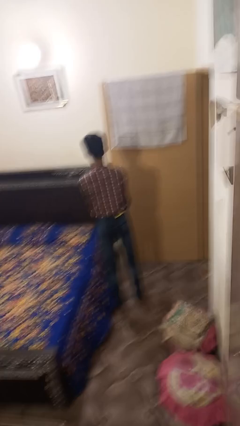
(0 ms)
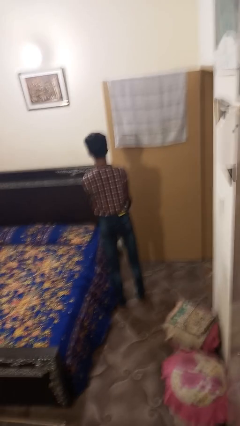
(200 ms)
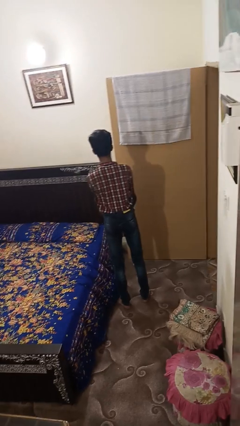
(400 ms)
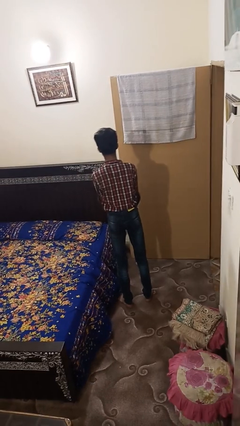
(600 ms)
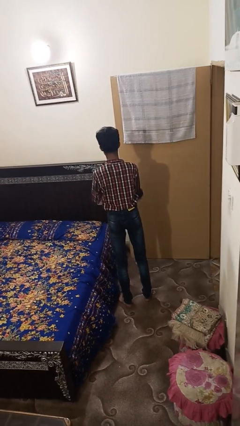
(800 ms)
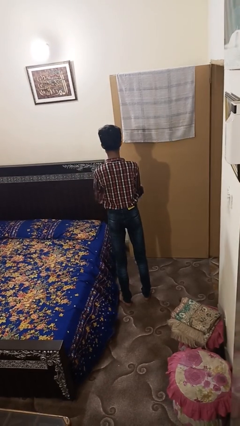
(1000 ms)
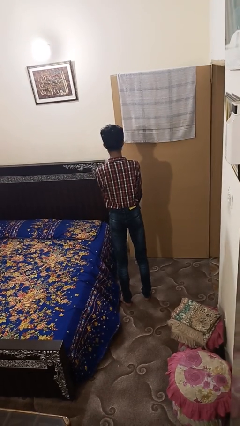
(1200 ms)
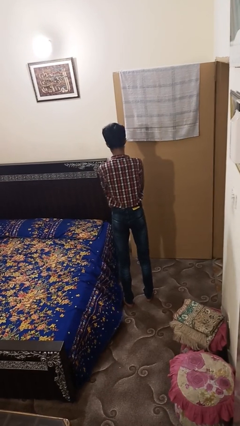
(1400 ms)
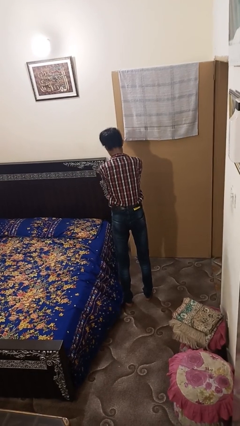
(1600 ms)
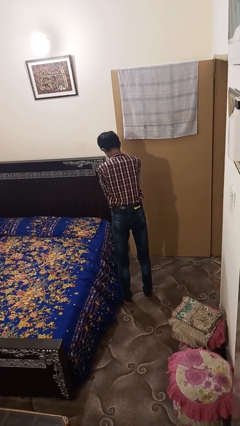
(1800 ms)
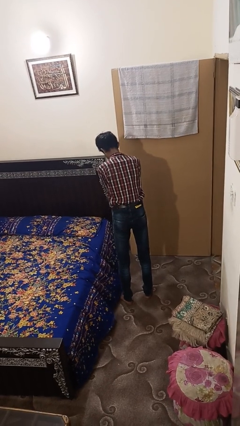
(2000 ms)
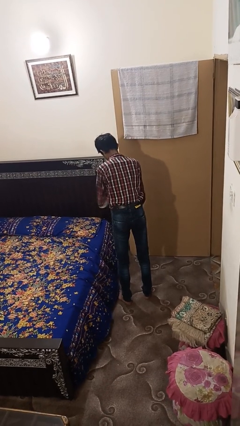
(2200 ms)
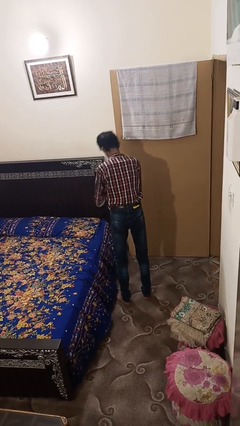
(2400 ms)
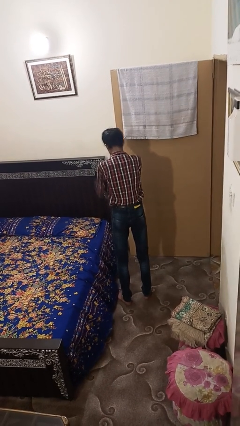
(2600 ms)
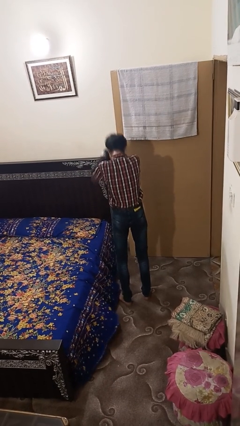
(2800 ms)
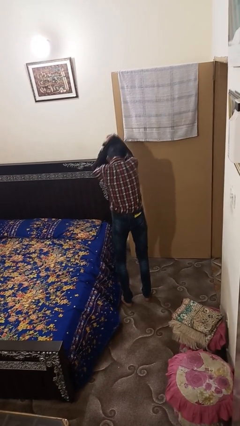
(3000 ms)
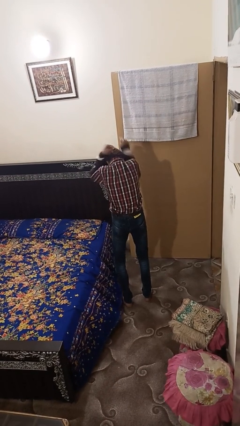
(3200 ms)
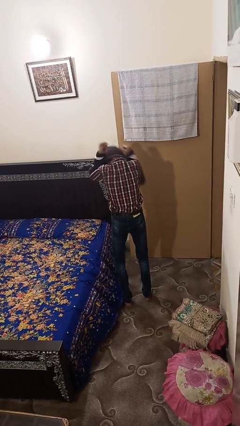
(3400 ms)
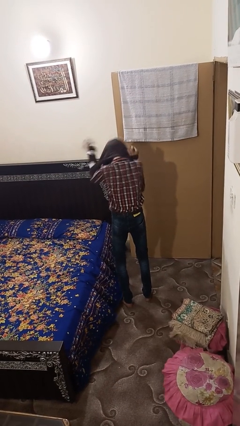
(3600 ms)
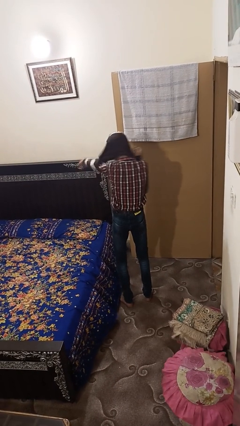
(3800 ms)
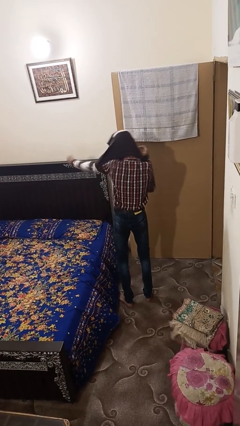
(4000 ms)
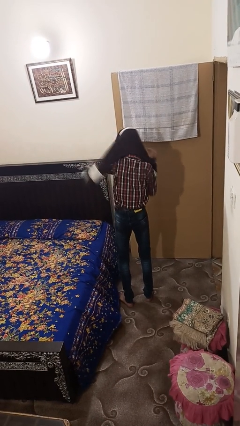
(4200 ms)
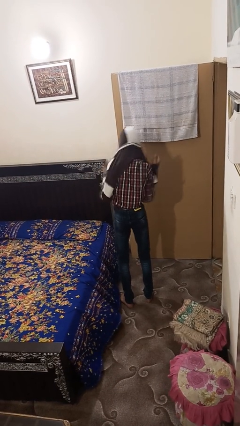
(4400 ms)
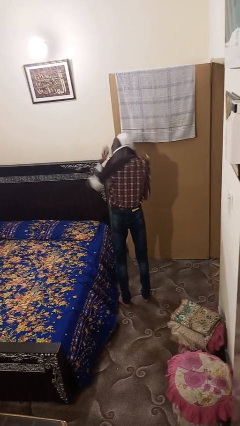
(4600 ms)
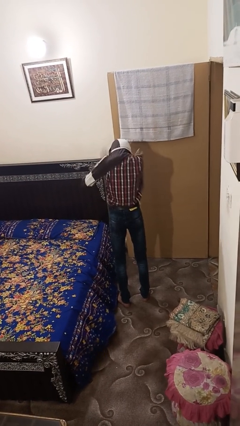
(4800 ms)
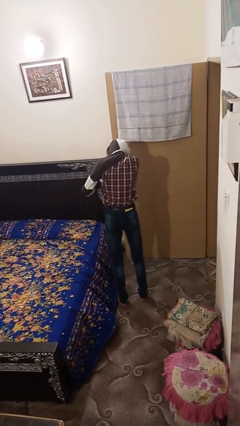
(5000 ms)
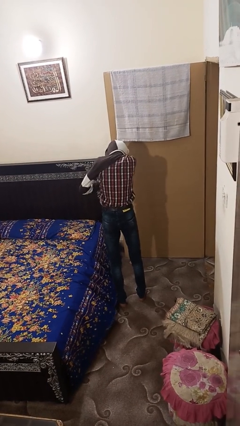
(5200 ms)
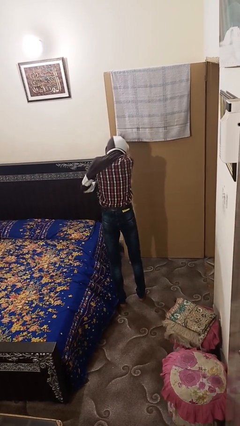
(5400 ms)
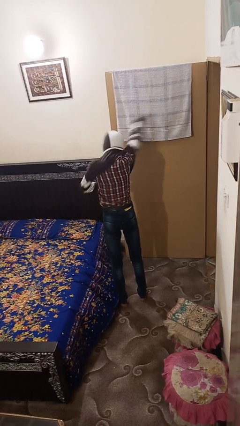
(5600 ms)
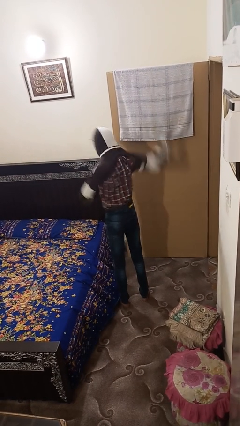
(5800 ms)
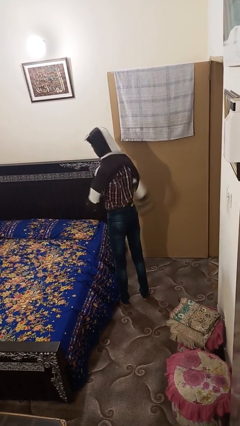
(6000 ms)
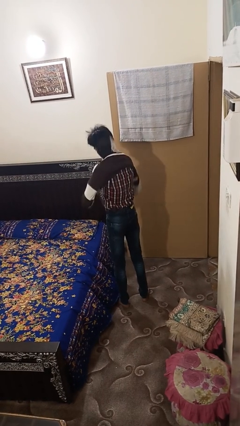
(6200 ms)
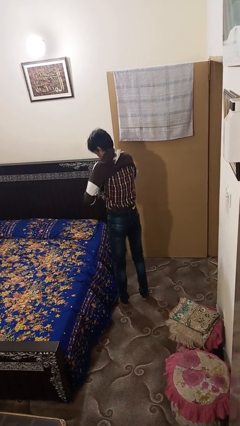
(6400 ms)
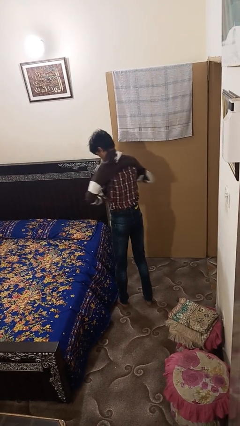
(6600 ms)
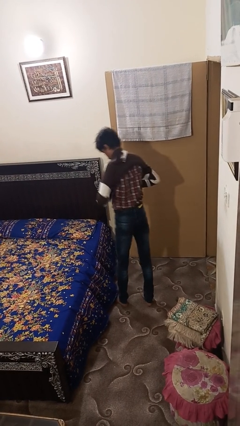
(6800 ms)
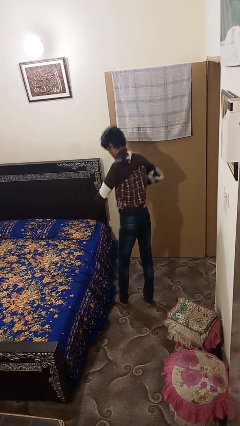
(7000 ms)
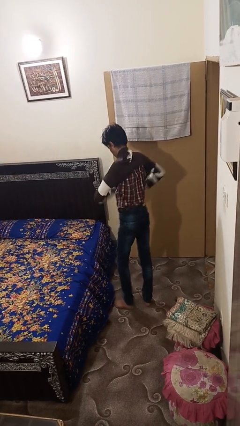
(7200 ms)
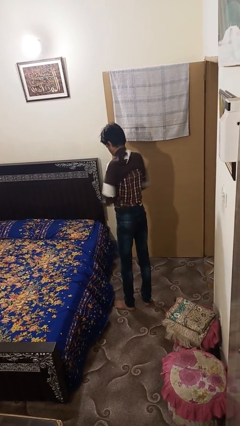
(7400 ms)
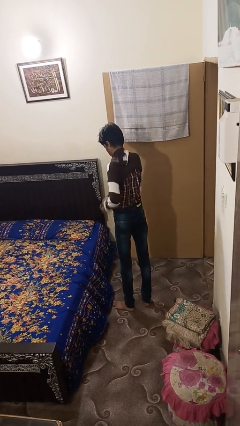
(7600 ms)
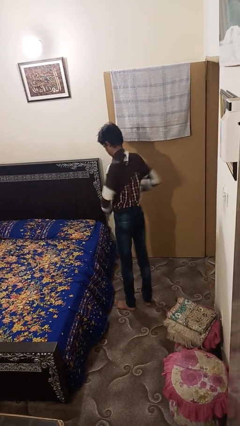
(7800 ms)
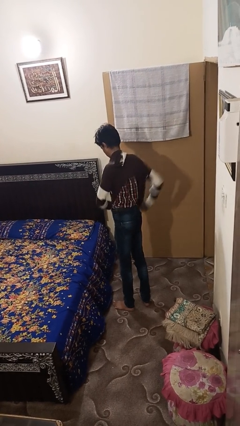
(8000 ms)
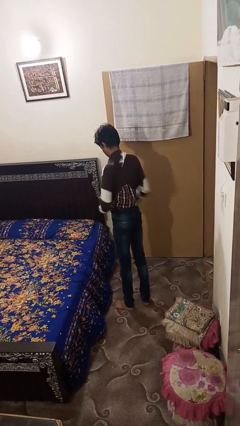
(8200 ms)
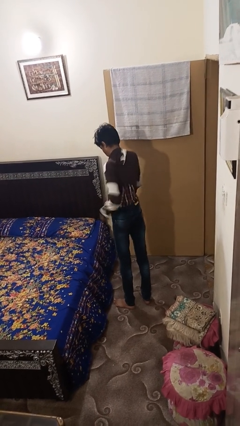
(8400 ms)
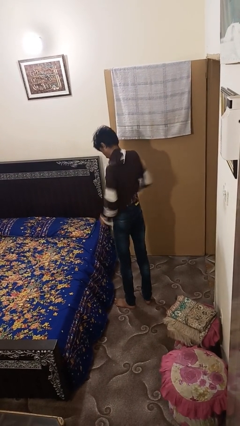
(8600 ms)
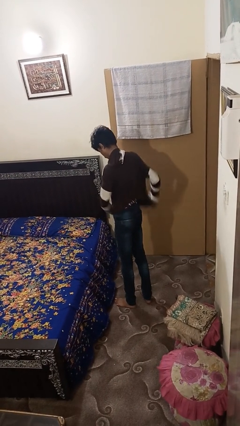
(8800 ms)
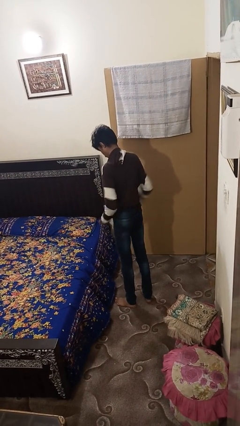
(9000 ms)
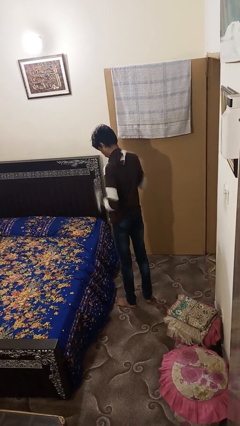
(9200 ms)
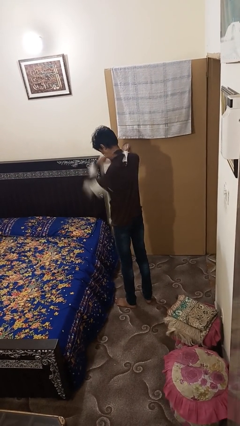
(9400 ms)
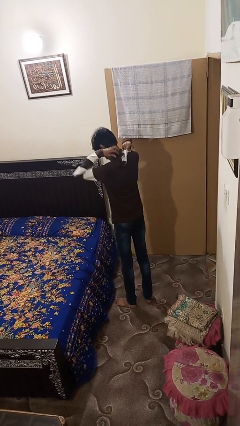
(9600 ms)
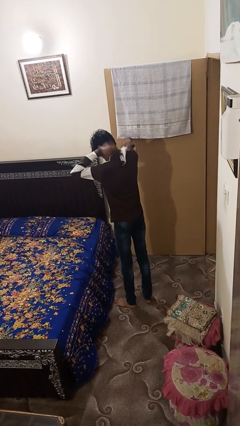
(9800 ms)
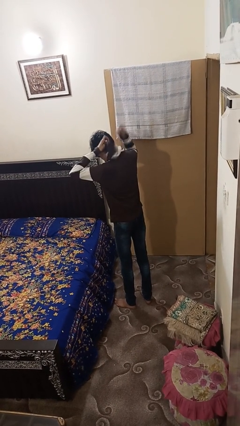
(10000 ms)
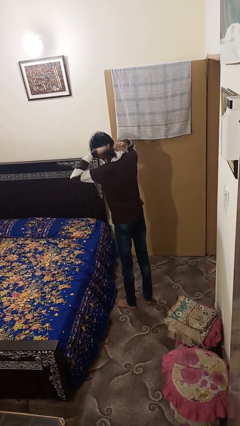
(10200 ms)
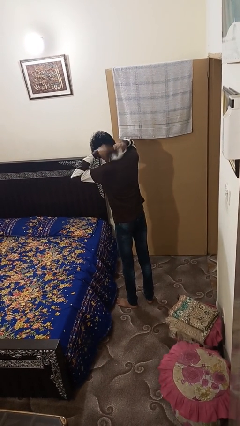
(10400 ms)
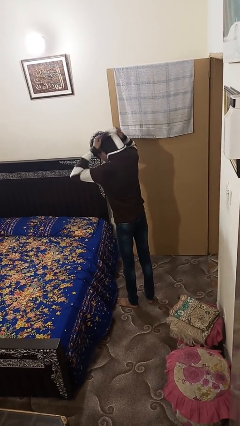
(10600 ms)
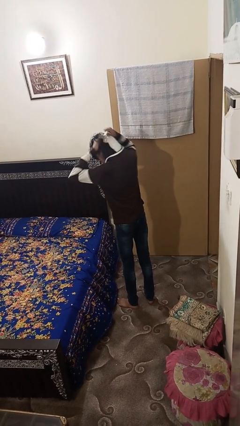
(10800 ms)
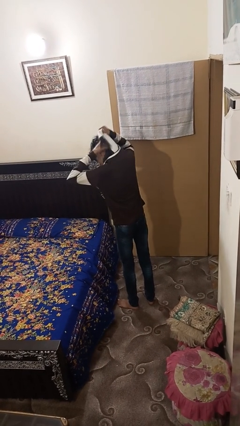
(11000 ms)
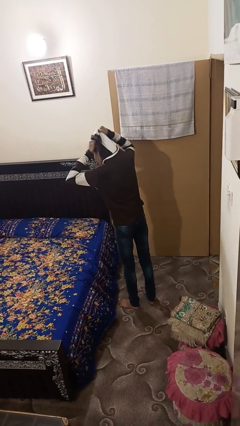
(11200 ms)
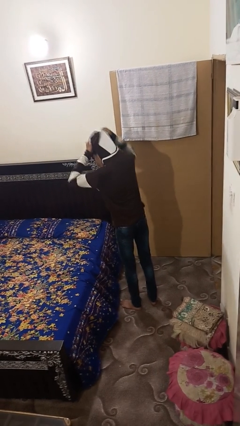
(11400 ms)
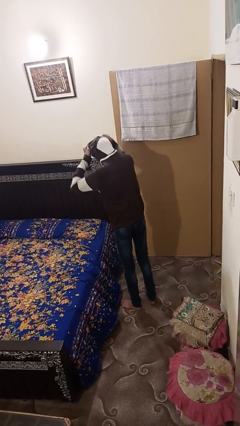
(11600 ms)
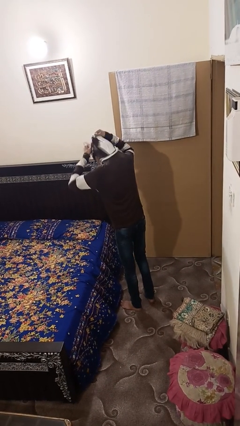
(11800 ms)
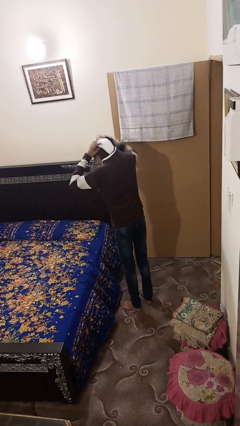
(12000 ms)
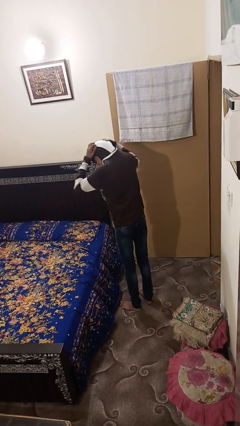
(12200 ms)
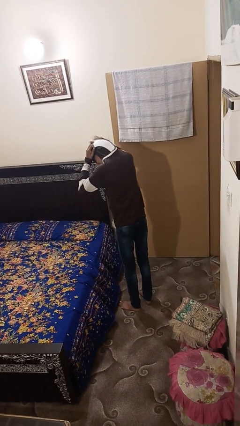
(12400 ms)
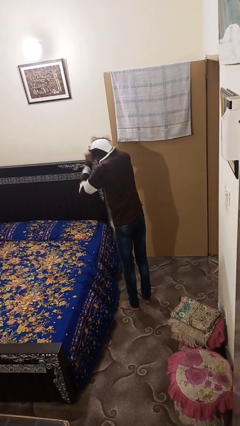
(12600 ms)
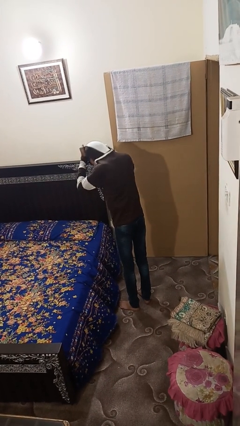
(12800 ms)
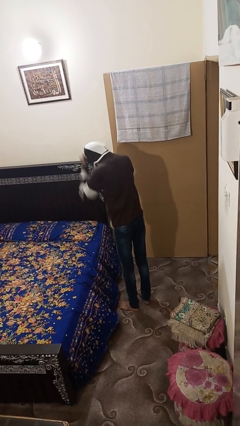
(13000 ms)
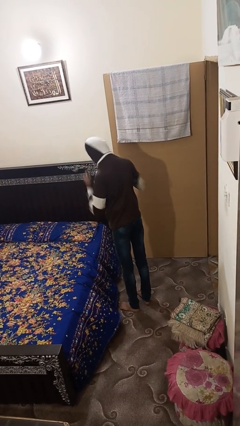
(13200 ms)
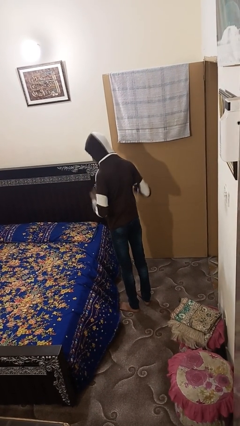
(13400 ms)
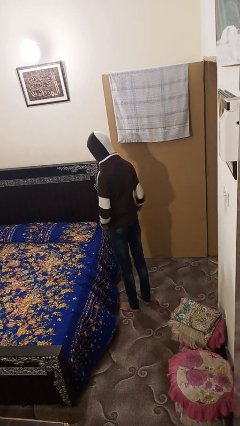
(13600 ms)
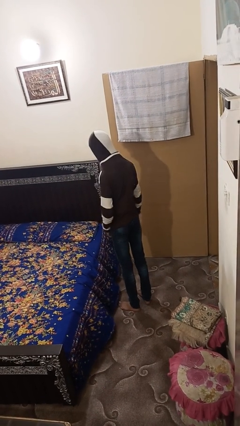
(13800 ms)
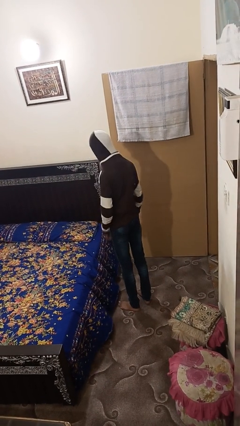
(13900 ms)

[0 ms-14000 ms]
person puts on hoodie

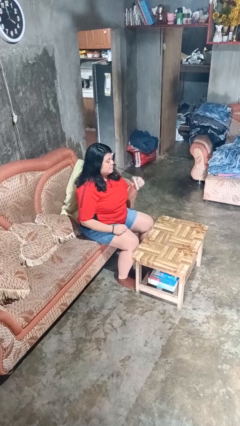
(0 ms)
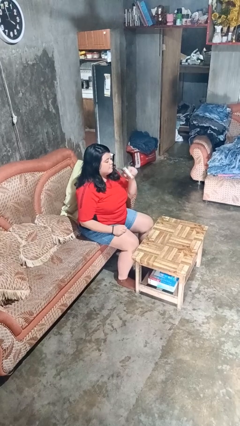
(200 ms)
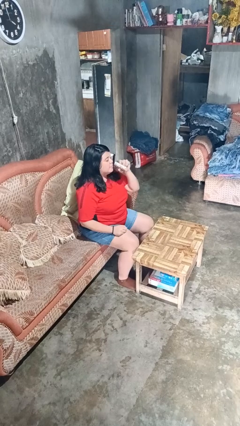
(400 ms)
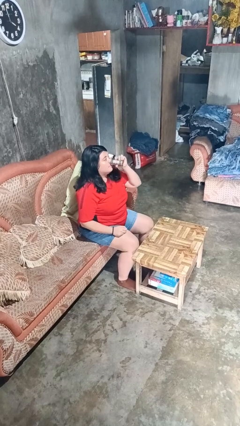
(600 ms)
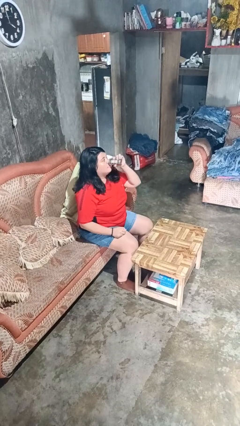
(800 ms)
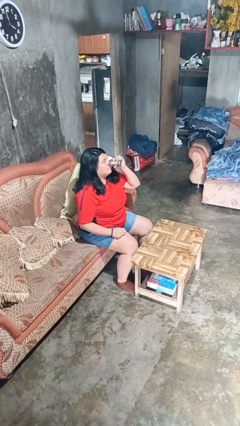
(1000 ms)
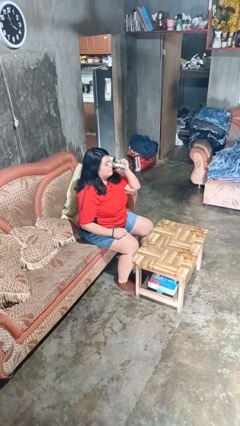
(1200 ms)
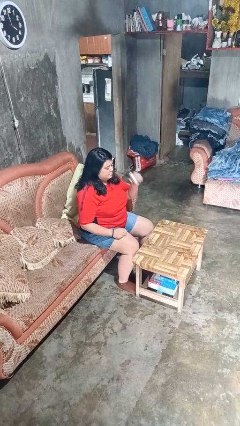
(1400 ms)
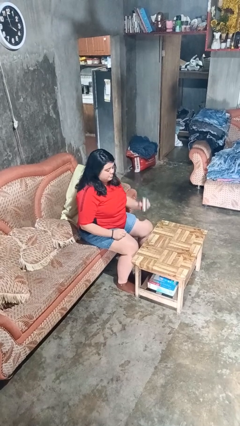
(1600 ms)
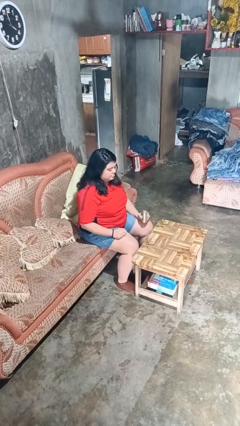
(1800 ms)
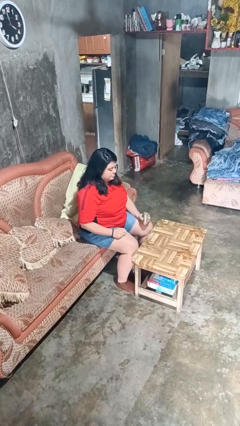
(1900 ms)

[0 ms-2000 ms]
person drinks from beverage can

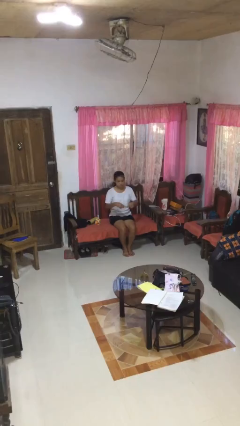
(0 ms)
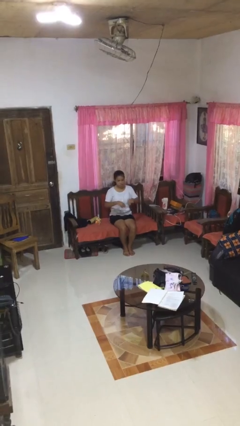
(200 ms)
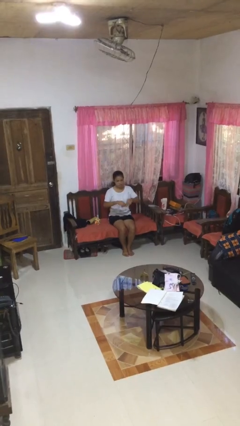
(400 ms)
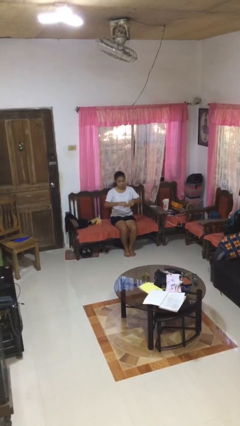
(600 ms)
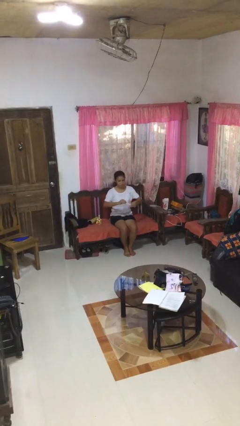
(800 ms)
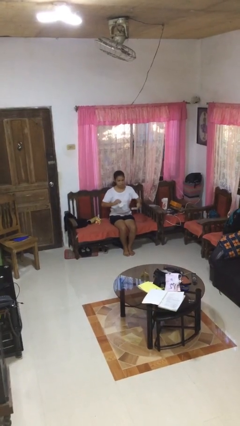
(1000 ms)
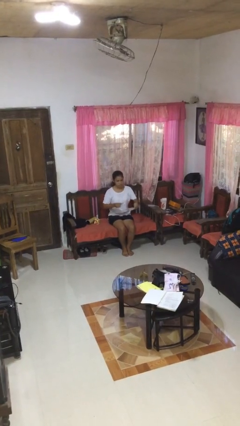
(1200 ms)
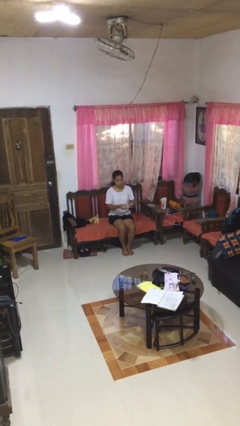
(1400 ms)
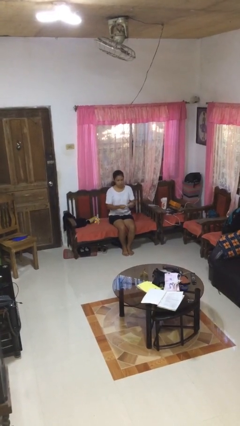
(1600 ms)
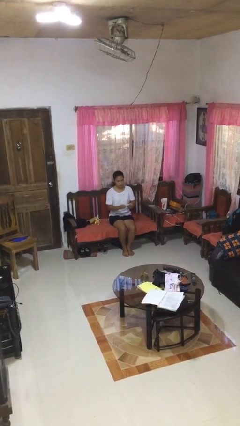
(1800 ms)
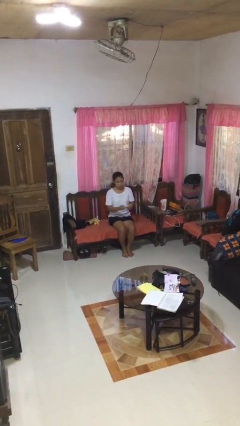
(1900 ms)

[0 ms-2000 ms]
person tears paper
